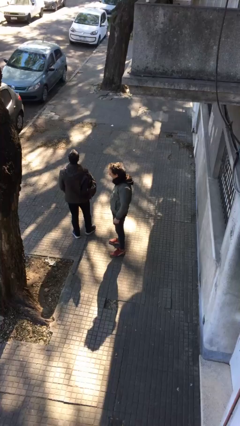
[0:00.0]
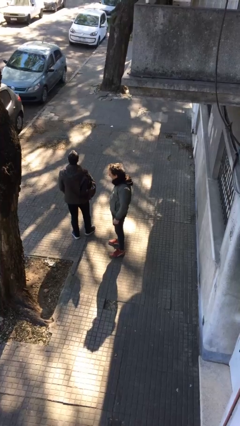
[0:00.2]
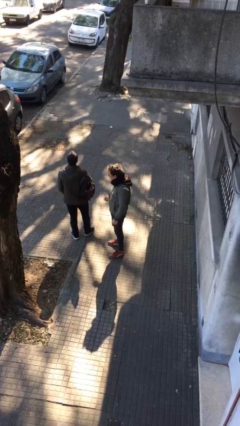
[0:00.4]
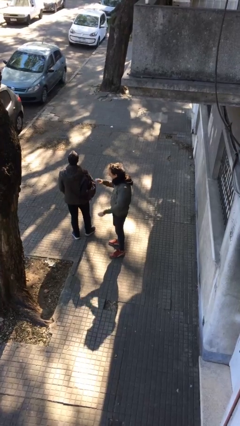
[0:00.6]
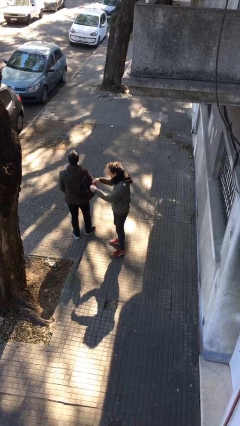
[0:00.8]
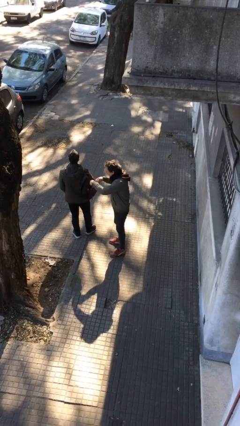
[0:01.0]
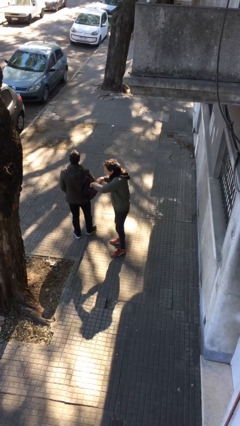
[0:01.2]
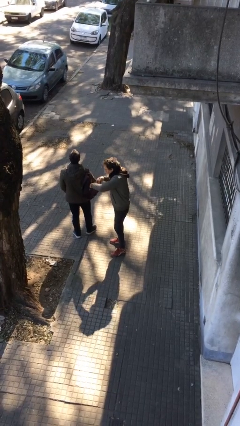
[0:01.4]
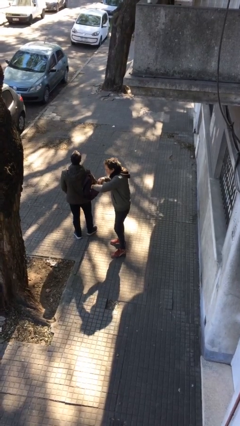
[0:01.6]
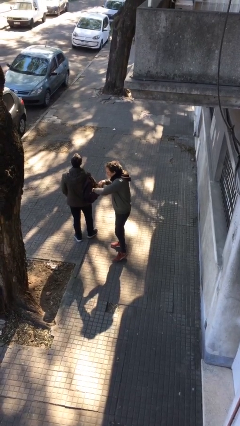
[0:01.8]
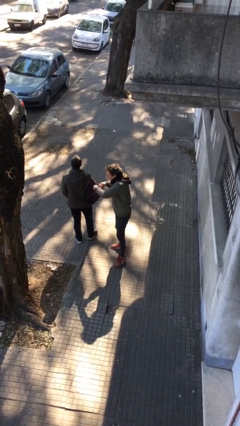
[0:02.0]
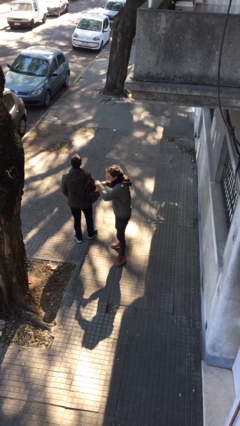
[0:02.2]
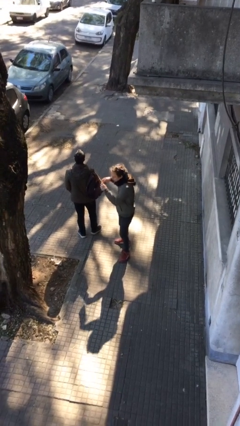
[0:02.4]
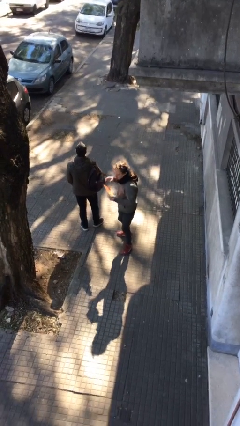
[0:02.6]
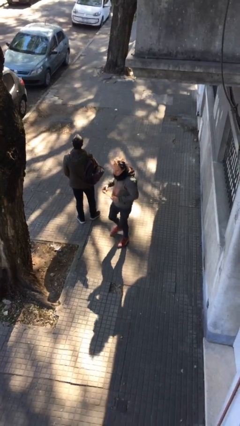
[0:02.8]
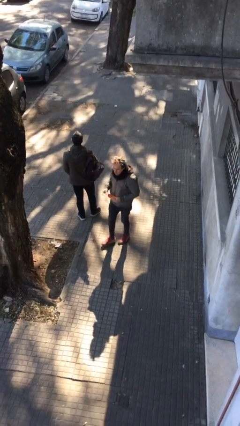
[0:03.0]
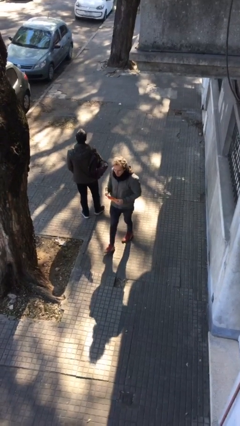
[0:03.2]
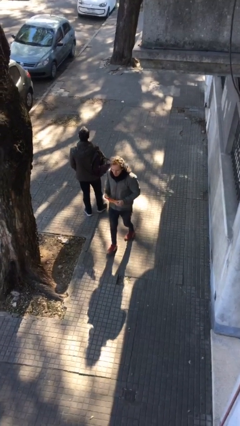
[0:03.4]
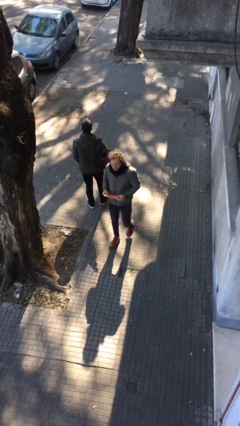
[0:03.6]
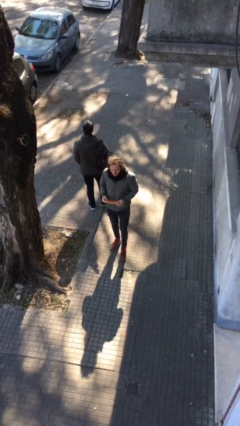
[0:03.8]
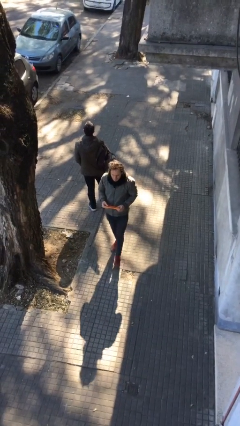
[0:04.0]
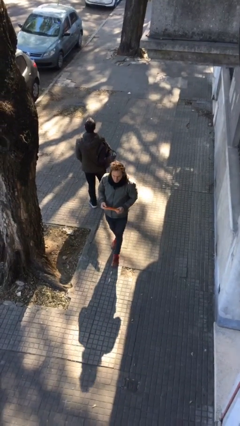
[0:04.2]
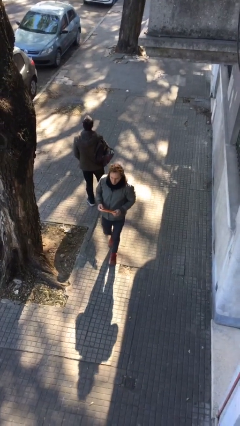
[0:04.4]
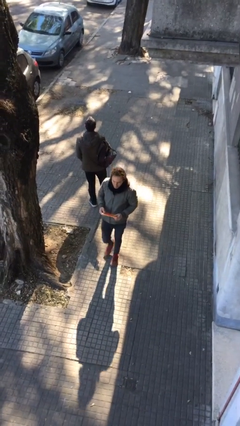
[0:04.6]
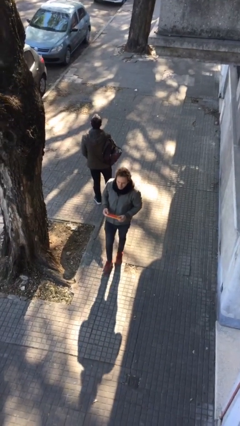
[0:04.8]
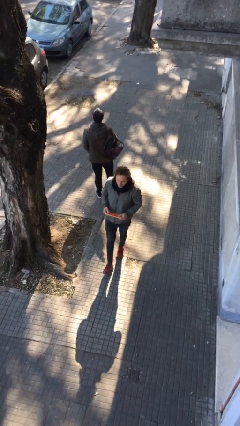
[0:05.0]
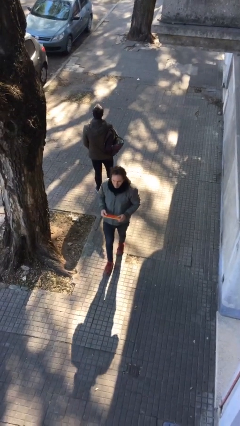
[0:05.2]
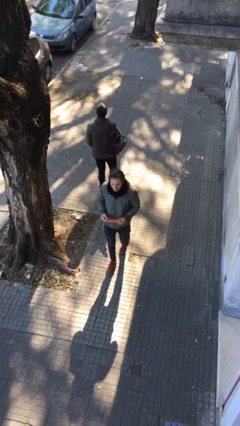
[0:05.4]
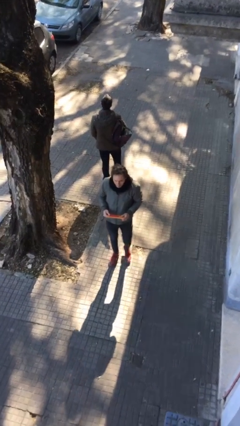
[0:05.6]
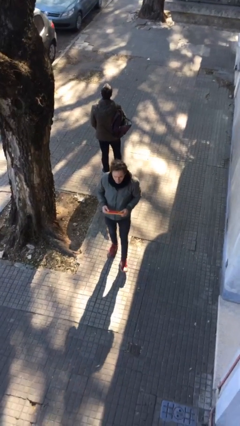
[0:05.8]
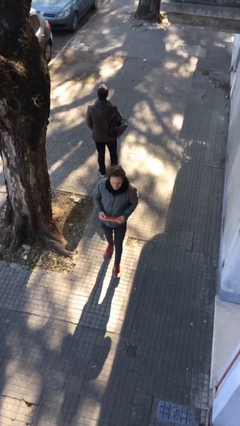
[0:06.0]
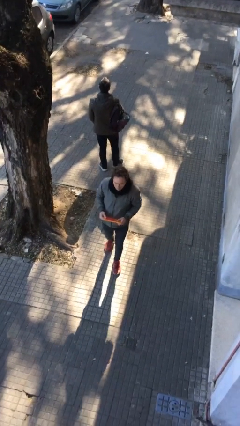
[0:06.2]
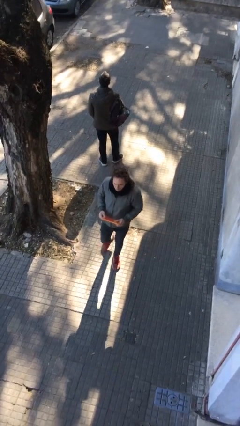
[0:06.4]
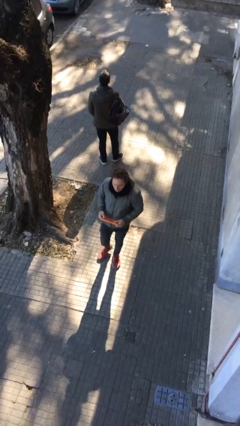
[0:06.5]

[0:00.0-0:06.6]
person steals object from person

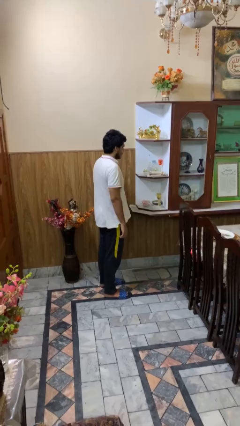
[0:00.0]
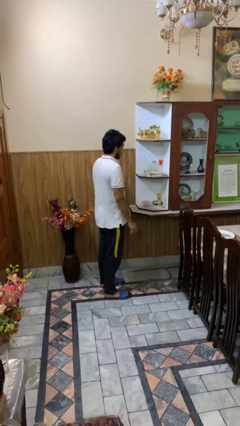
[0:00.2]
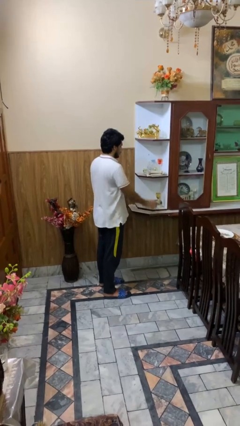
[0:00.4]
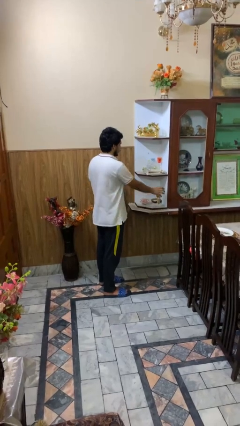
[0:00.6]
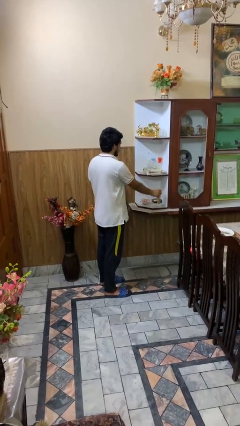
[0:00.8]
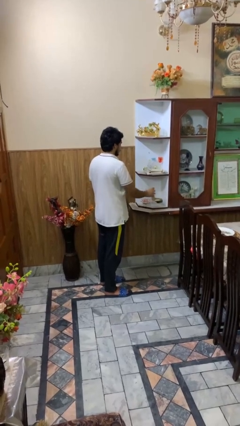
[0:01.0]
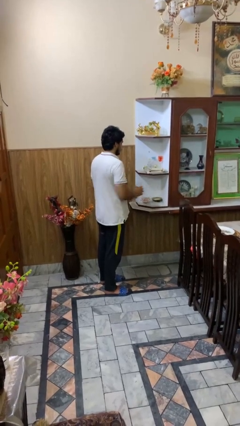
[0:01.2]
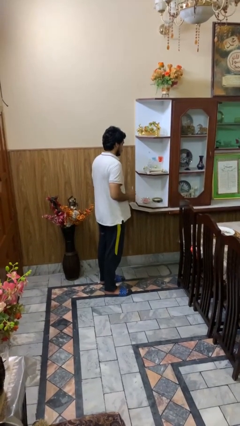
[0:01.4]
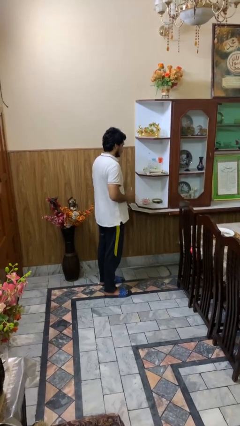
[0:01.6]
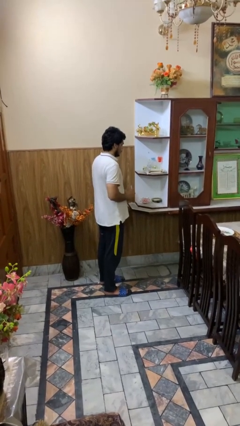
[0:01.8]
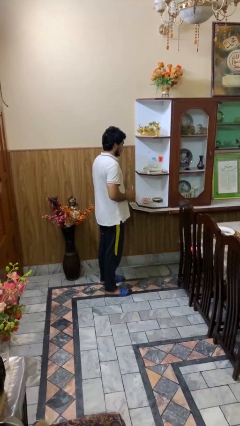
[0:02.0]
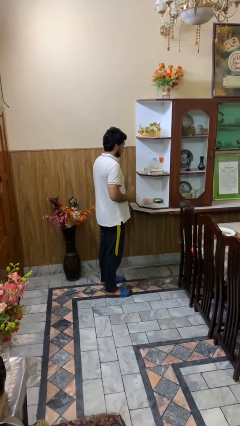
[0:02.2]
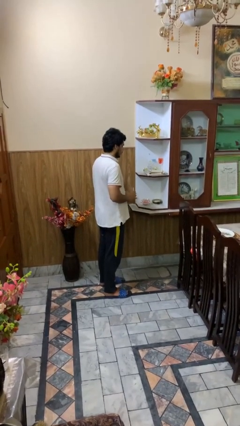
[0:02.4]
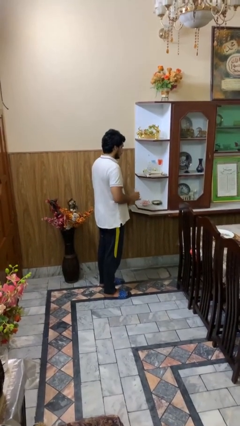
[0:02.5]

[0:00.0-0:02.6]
person picks up object from cabinet

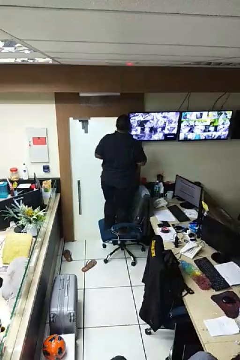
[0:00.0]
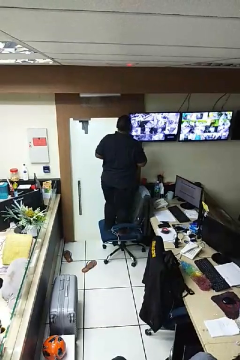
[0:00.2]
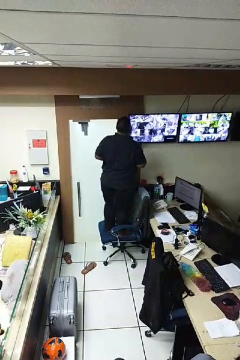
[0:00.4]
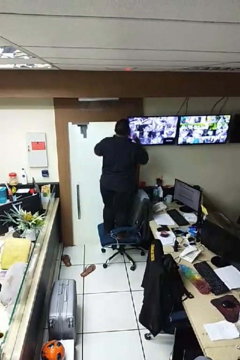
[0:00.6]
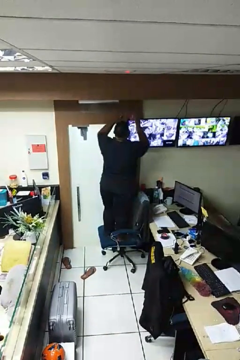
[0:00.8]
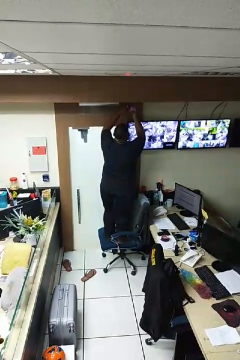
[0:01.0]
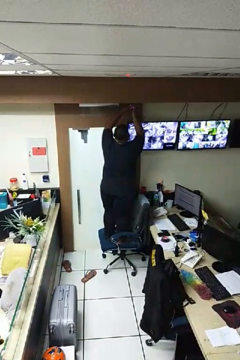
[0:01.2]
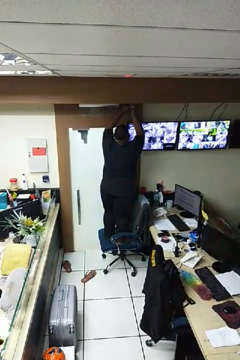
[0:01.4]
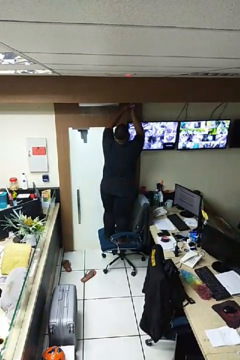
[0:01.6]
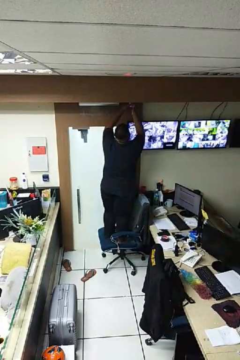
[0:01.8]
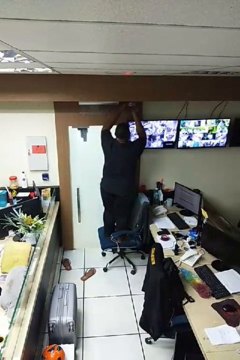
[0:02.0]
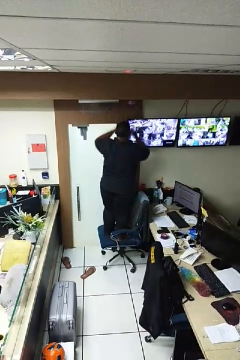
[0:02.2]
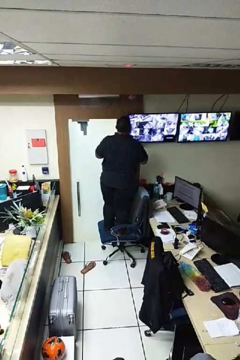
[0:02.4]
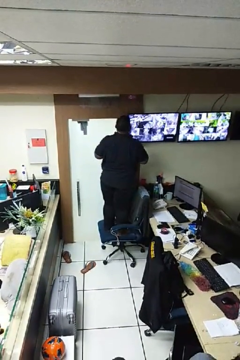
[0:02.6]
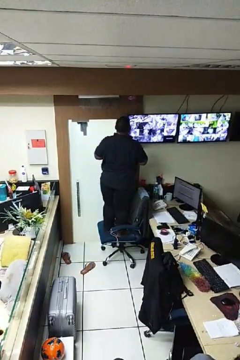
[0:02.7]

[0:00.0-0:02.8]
person puts up smoke detector

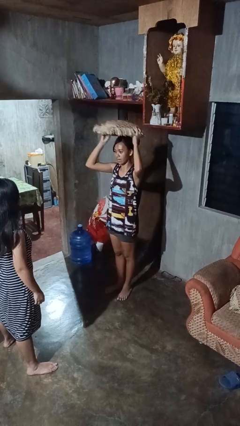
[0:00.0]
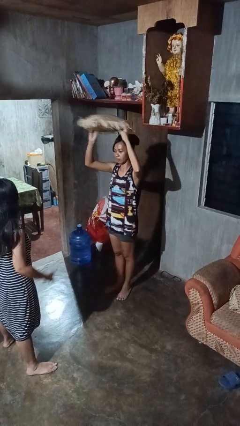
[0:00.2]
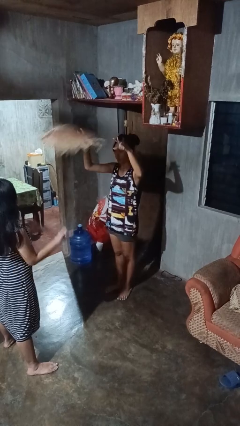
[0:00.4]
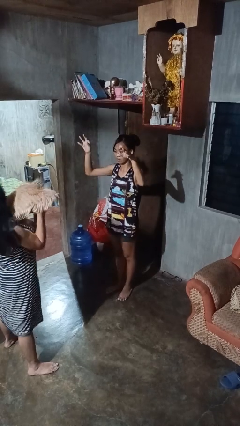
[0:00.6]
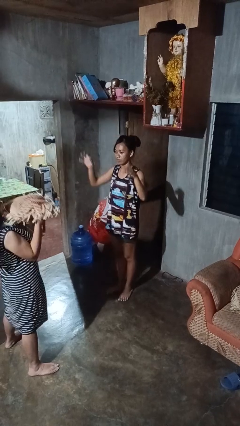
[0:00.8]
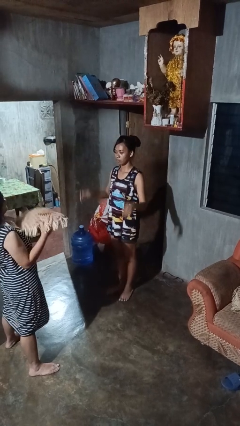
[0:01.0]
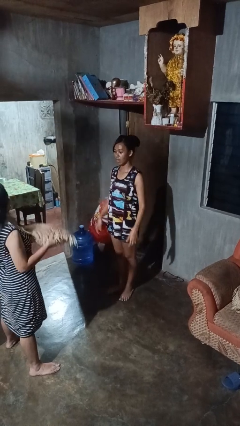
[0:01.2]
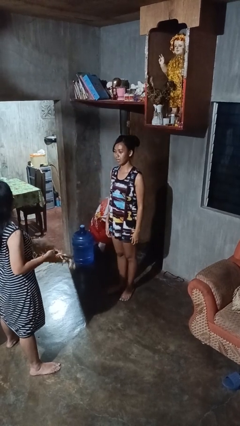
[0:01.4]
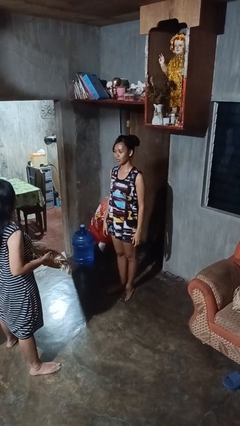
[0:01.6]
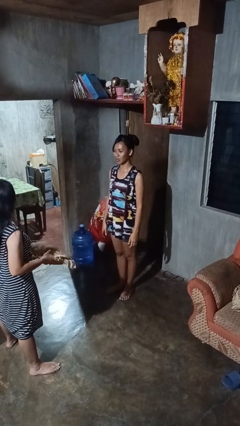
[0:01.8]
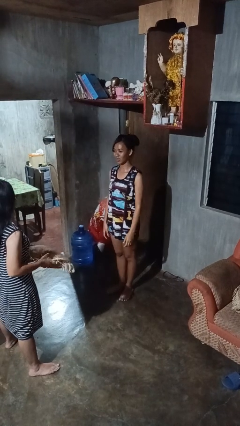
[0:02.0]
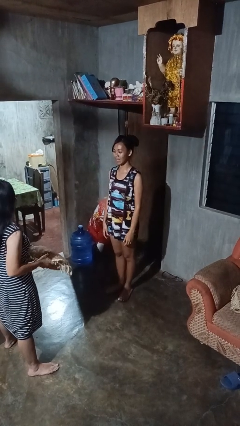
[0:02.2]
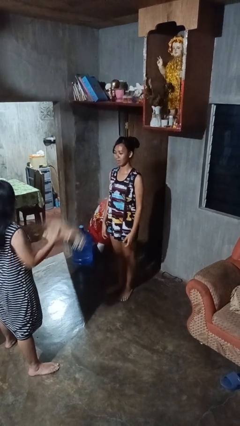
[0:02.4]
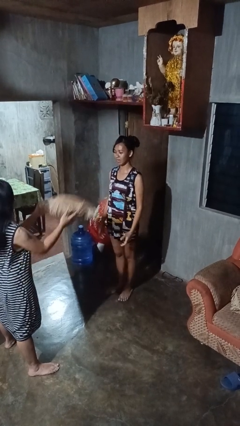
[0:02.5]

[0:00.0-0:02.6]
person throws object to person

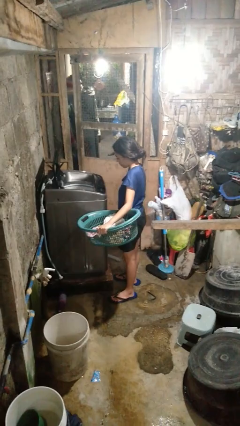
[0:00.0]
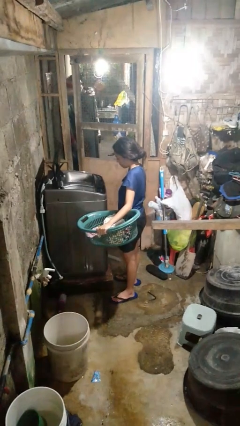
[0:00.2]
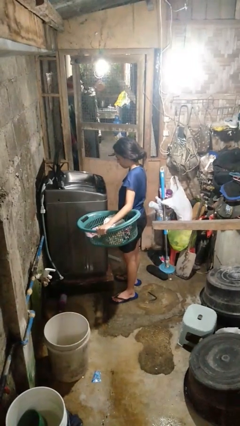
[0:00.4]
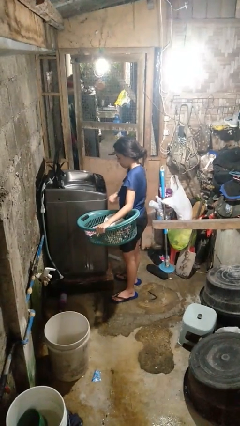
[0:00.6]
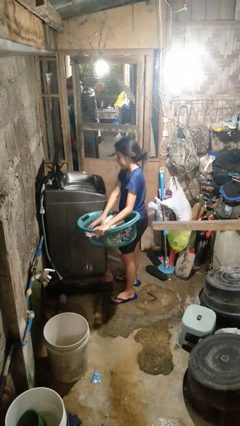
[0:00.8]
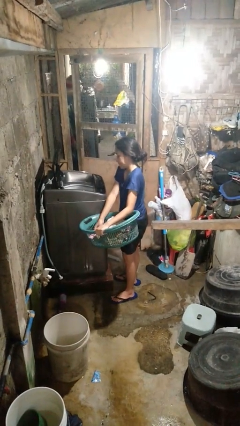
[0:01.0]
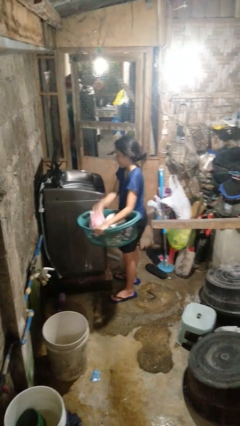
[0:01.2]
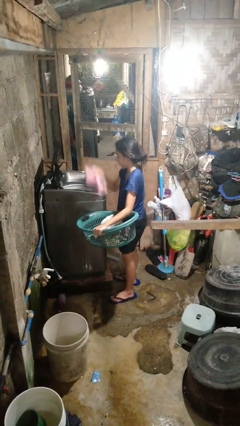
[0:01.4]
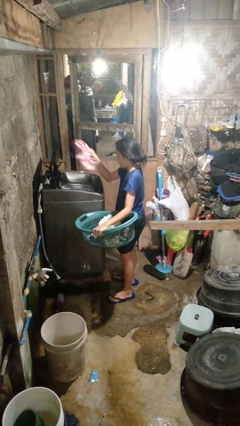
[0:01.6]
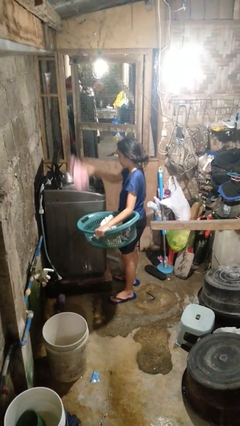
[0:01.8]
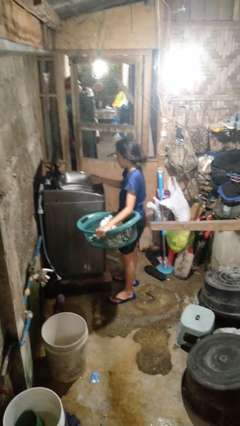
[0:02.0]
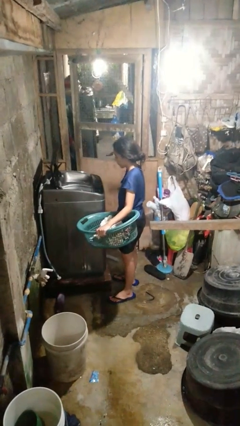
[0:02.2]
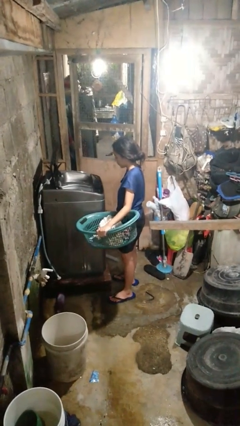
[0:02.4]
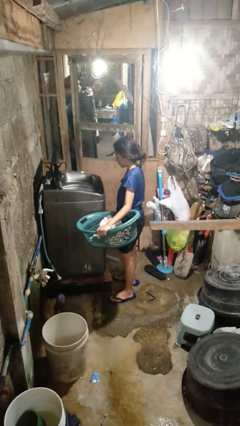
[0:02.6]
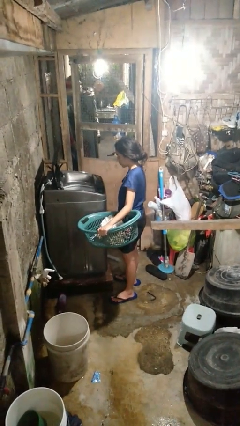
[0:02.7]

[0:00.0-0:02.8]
person loads clotheswasher

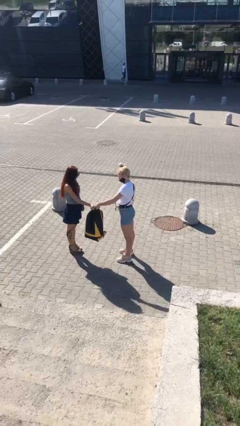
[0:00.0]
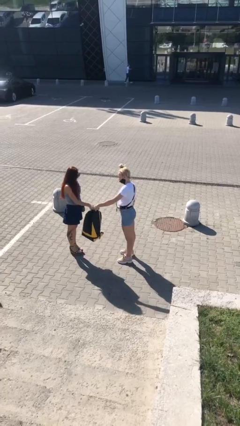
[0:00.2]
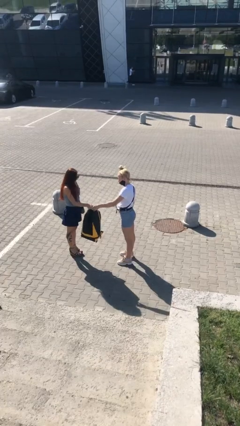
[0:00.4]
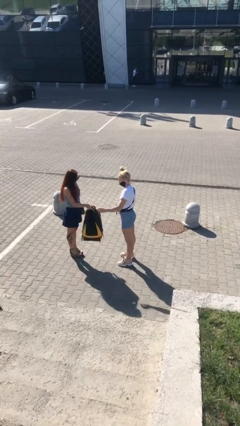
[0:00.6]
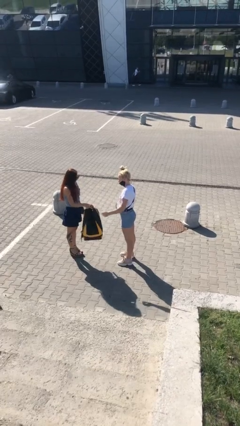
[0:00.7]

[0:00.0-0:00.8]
person transfers object to person
